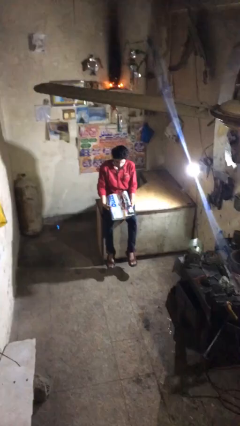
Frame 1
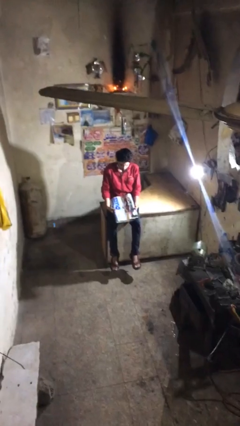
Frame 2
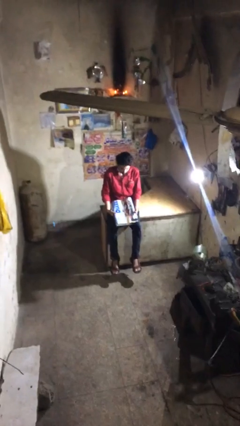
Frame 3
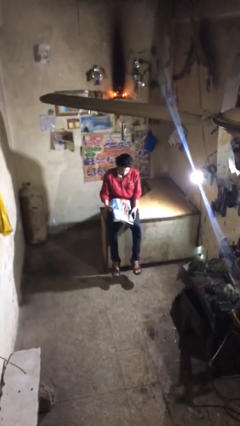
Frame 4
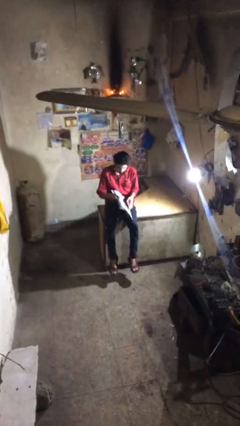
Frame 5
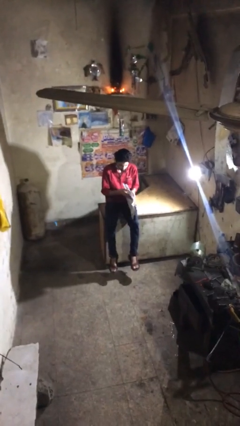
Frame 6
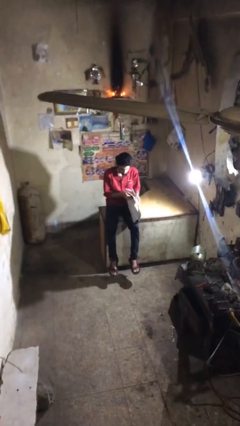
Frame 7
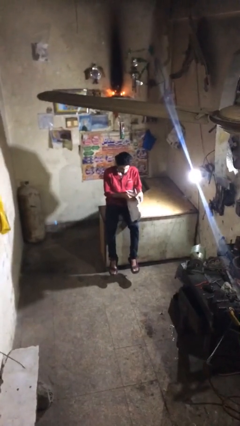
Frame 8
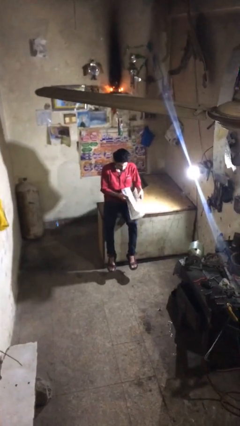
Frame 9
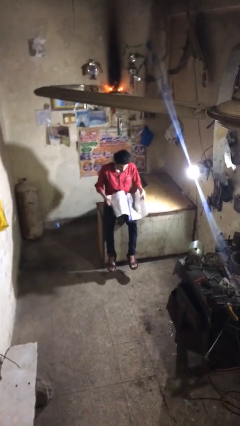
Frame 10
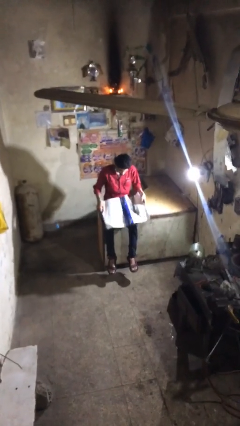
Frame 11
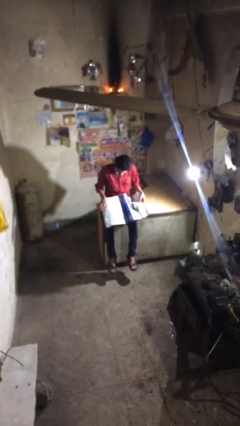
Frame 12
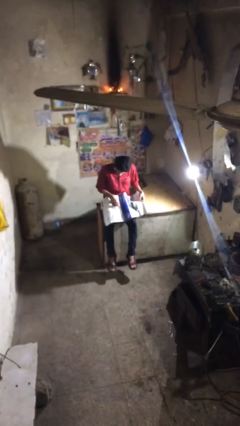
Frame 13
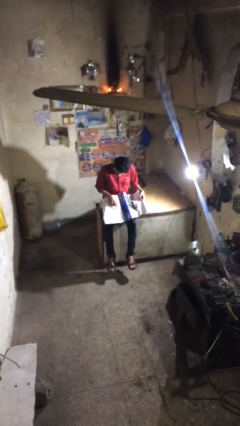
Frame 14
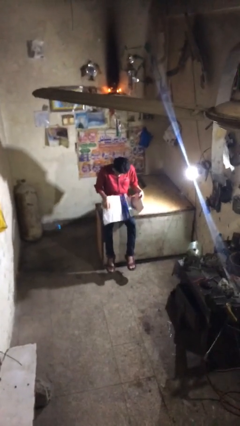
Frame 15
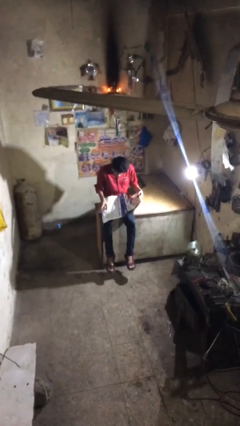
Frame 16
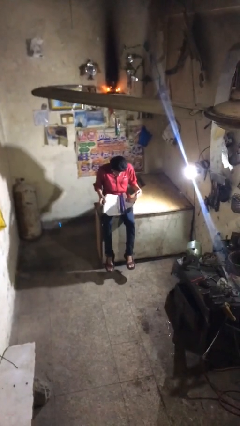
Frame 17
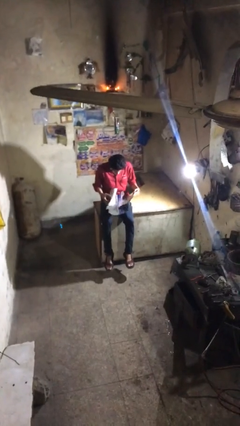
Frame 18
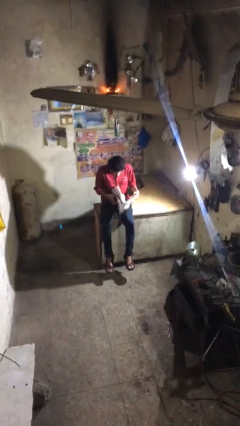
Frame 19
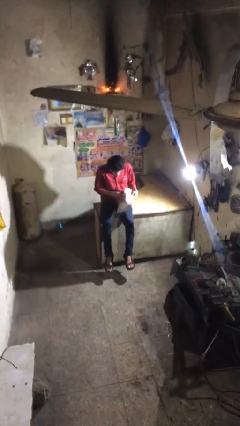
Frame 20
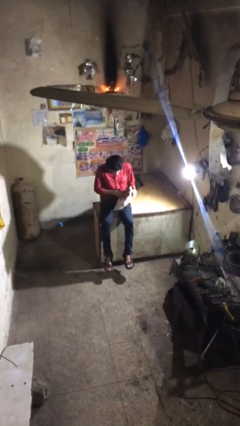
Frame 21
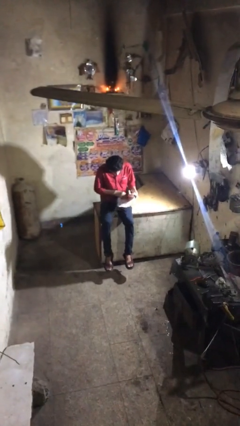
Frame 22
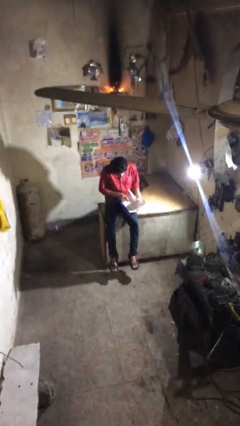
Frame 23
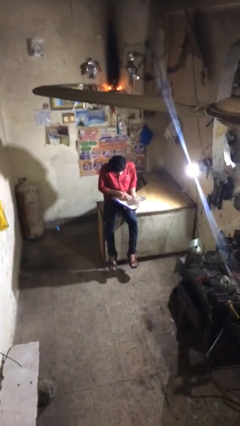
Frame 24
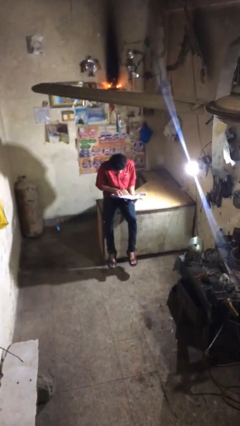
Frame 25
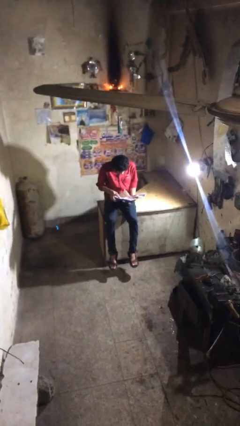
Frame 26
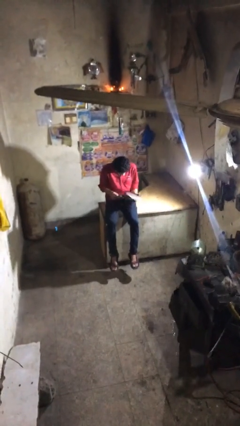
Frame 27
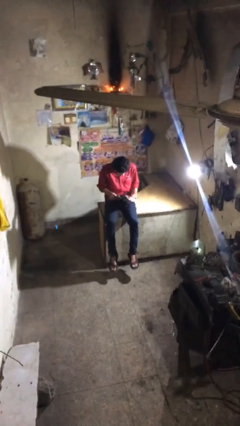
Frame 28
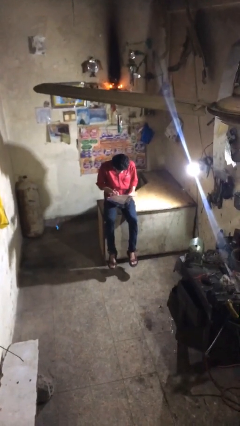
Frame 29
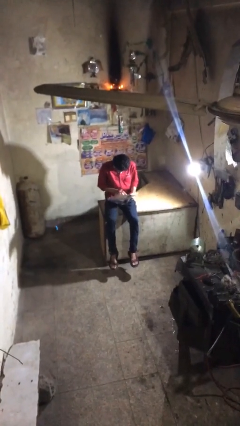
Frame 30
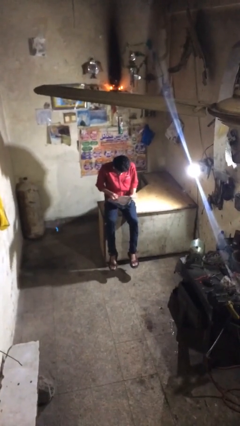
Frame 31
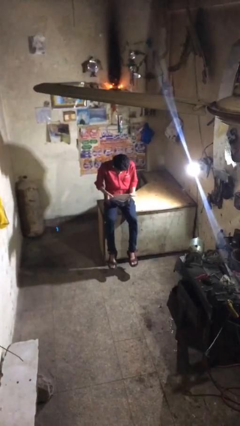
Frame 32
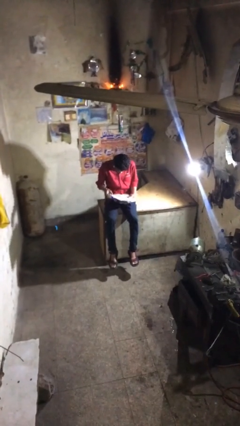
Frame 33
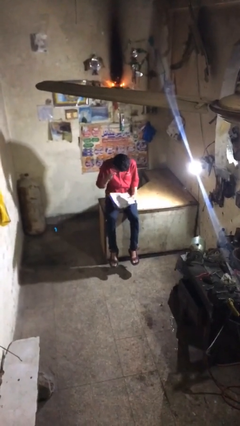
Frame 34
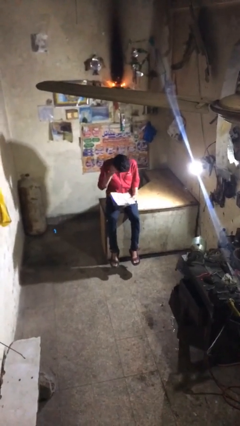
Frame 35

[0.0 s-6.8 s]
person reads document

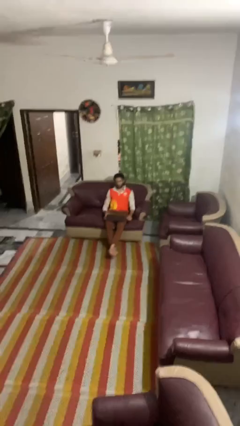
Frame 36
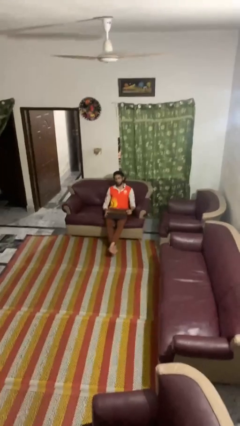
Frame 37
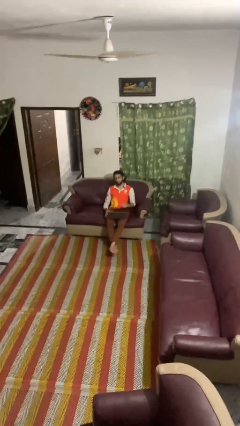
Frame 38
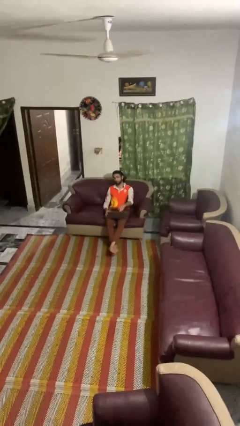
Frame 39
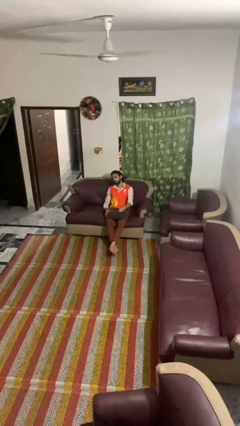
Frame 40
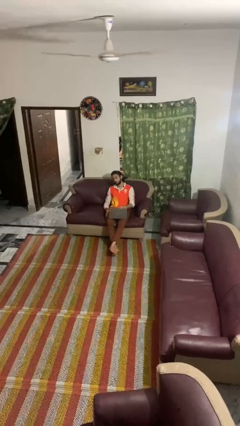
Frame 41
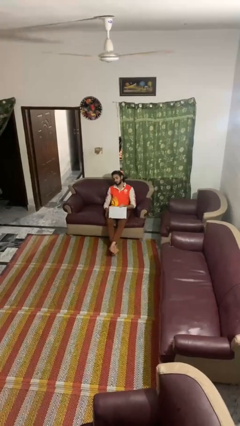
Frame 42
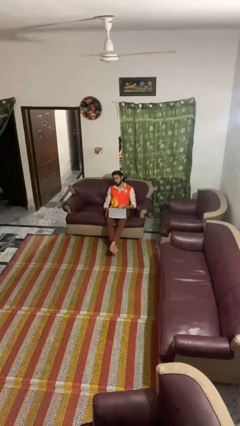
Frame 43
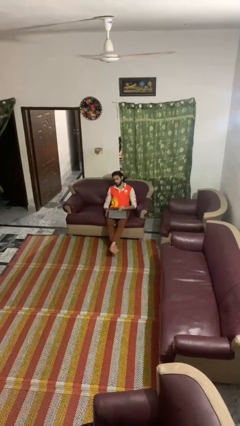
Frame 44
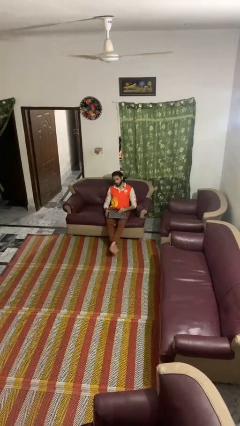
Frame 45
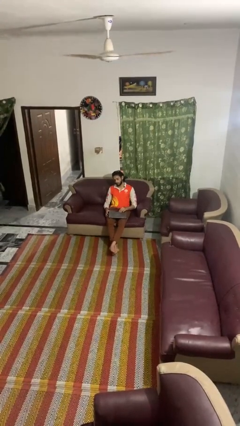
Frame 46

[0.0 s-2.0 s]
person closes laptop

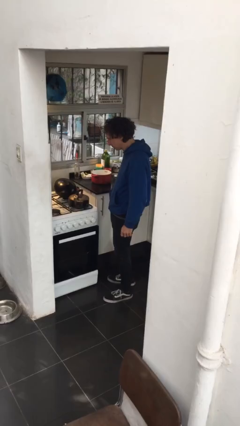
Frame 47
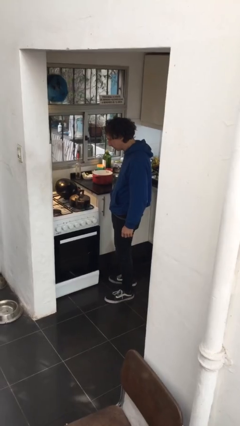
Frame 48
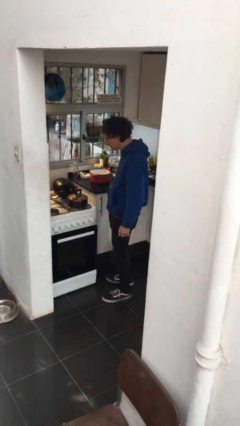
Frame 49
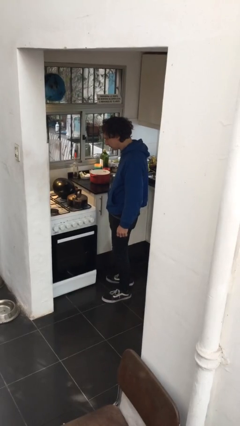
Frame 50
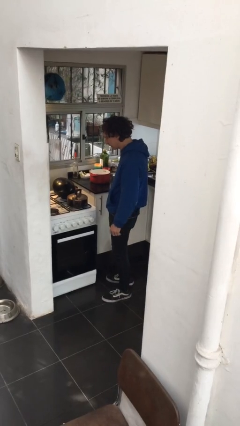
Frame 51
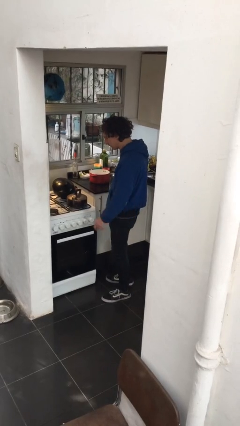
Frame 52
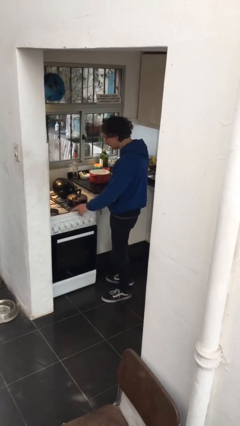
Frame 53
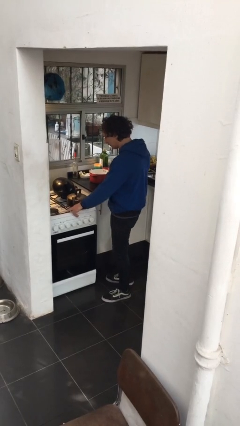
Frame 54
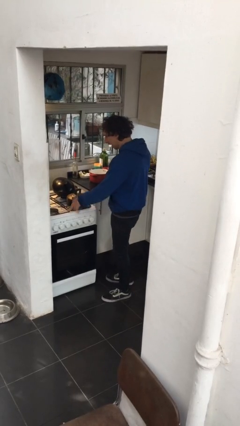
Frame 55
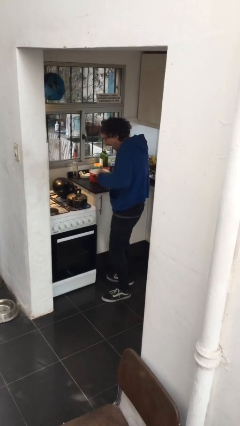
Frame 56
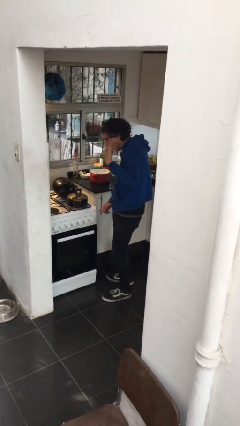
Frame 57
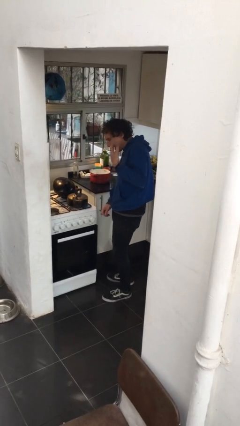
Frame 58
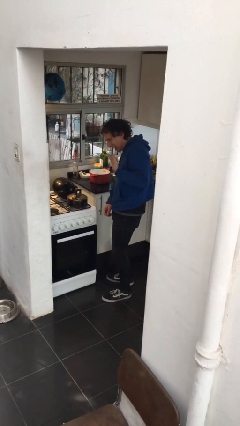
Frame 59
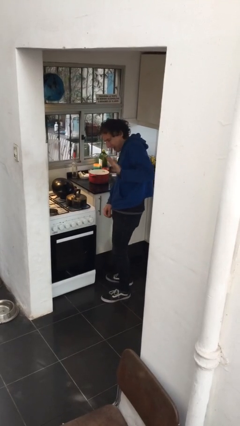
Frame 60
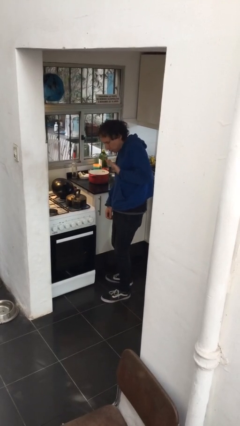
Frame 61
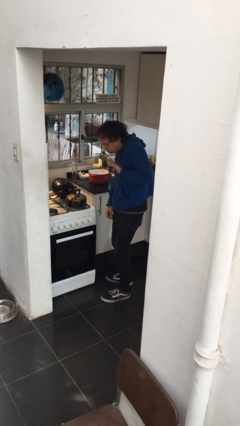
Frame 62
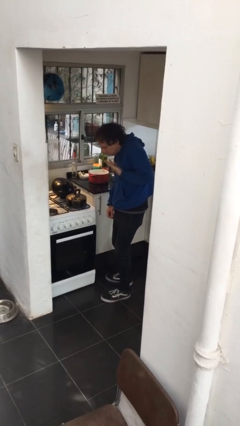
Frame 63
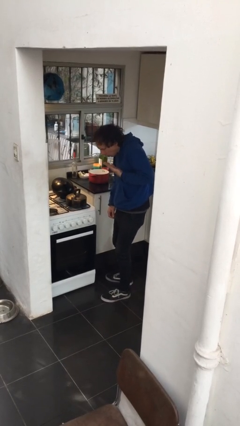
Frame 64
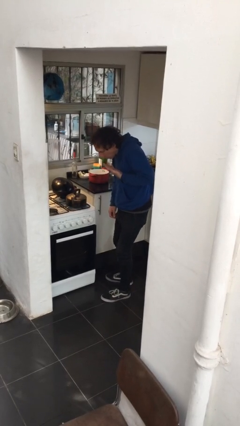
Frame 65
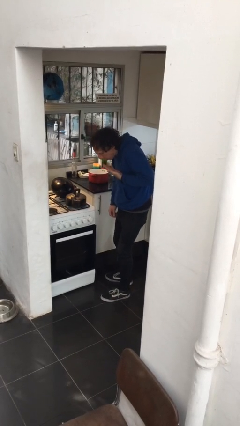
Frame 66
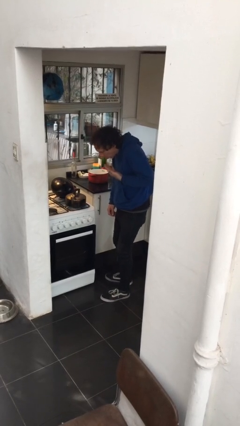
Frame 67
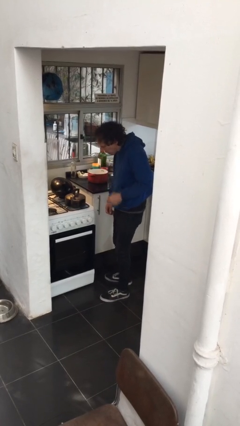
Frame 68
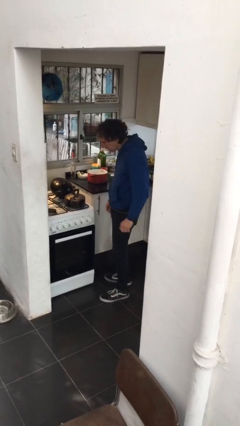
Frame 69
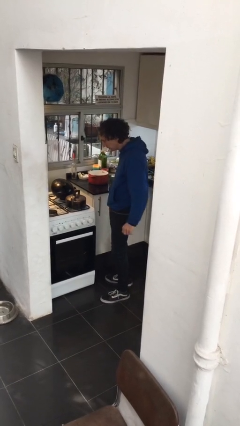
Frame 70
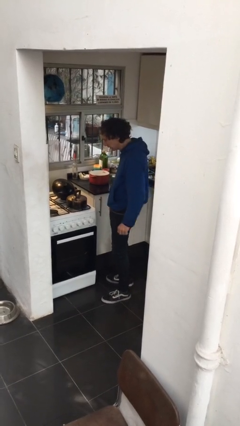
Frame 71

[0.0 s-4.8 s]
person burns hand

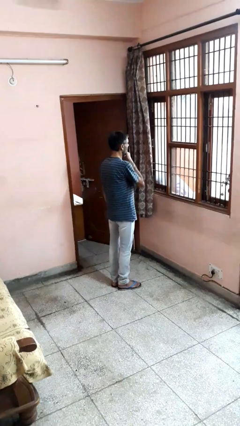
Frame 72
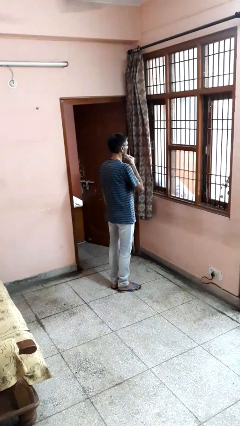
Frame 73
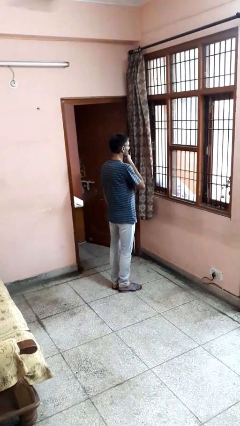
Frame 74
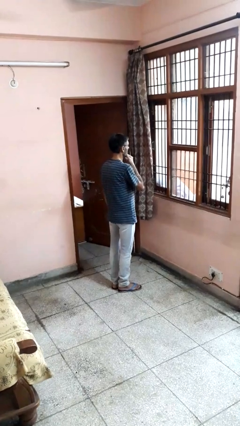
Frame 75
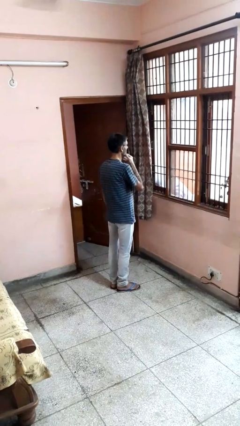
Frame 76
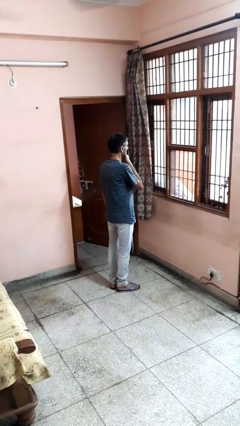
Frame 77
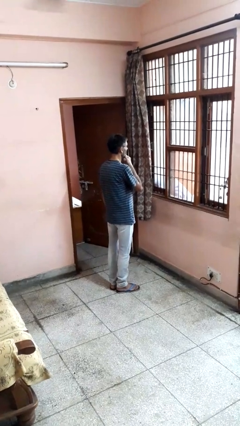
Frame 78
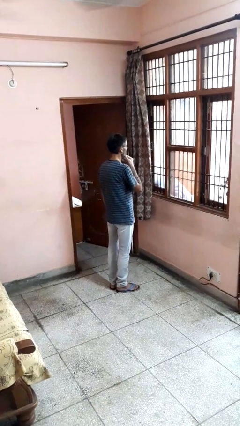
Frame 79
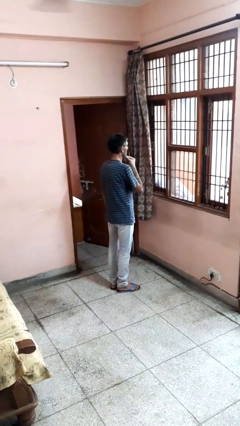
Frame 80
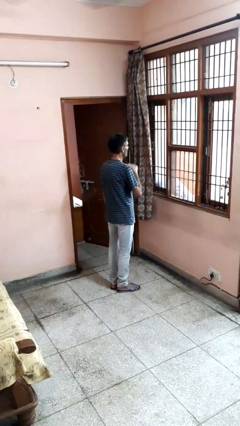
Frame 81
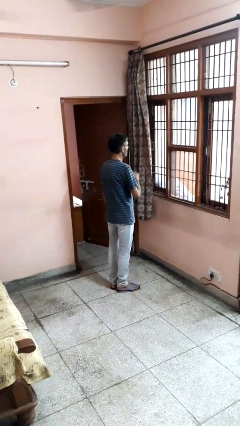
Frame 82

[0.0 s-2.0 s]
person strokes chin

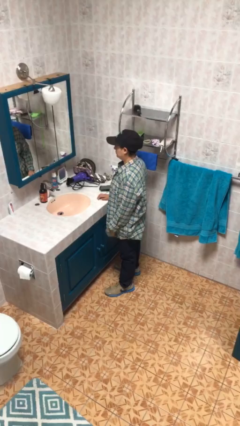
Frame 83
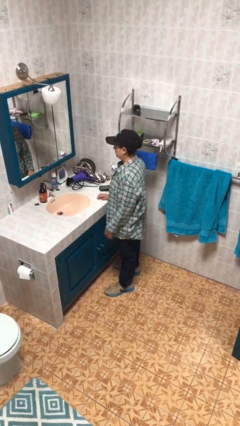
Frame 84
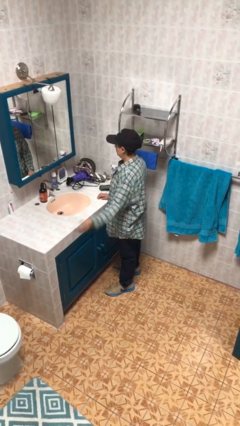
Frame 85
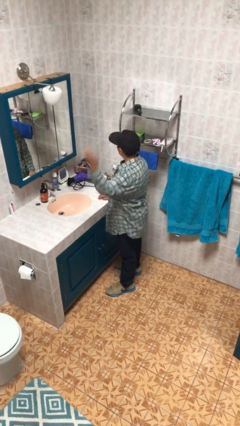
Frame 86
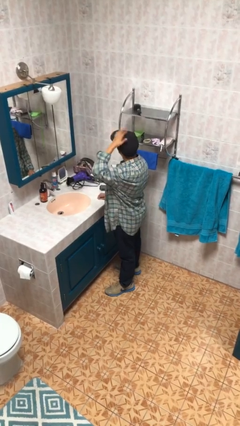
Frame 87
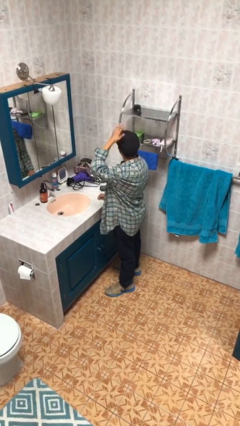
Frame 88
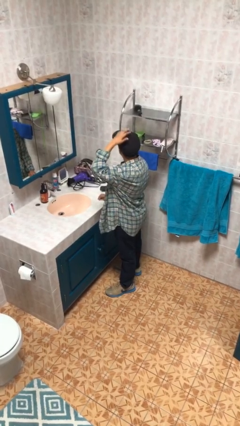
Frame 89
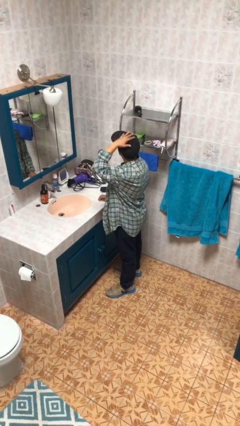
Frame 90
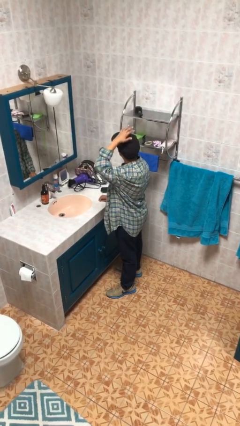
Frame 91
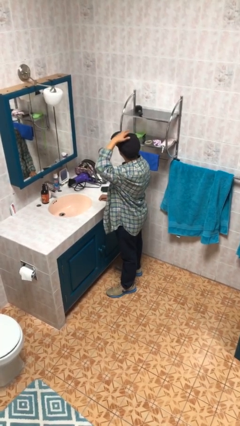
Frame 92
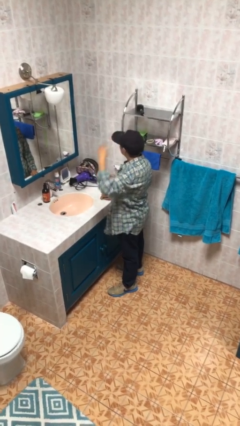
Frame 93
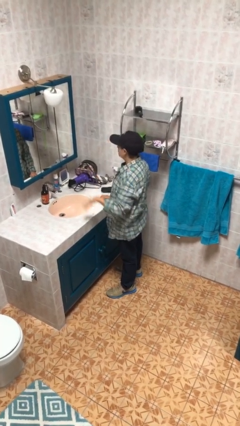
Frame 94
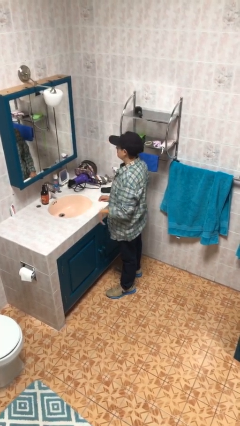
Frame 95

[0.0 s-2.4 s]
person pats head
